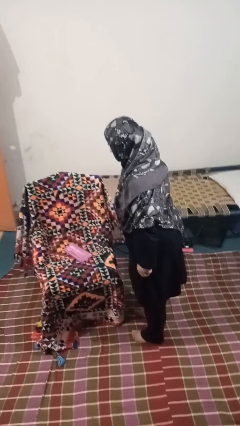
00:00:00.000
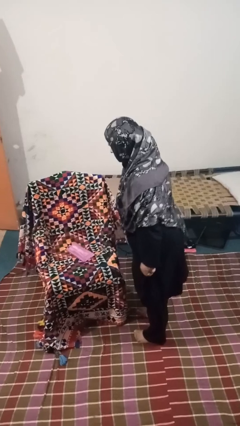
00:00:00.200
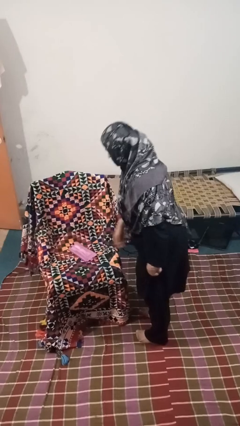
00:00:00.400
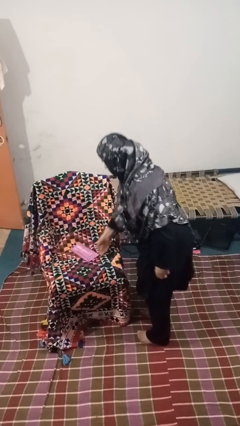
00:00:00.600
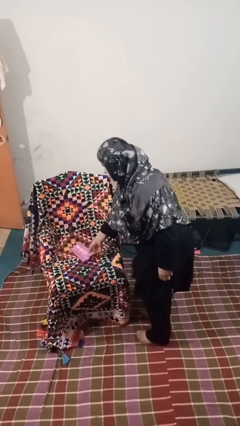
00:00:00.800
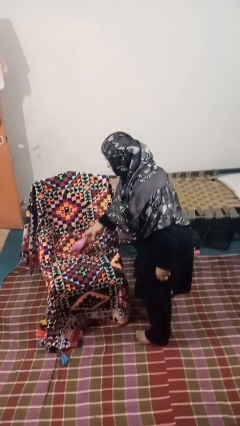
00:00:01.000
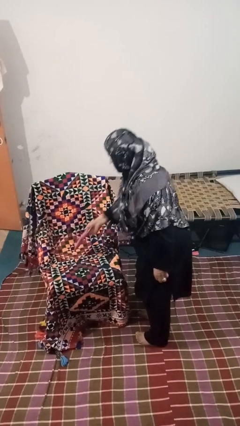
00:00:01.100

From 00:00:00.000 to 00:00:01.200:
person puts down object on couch

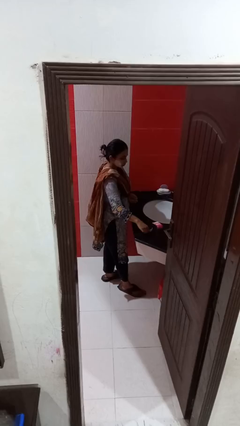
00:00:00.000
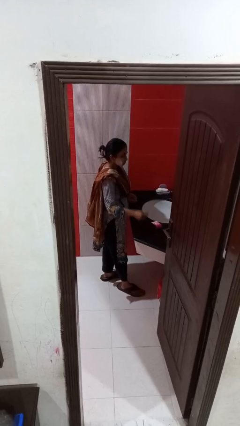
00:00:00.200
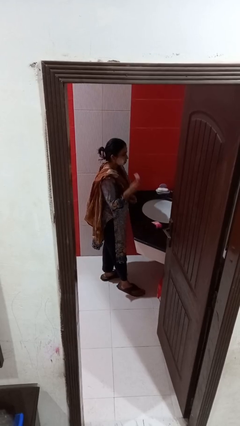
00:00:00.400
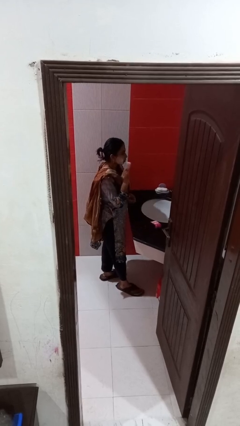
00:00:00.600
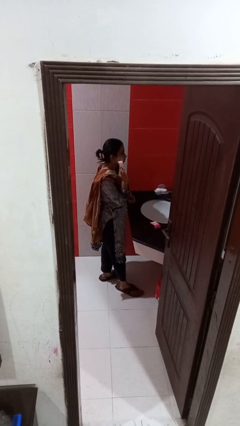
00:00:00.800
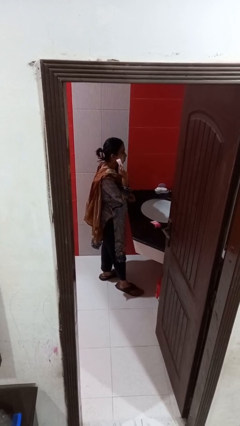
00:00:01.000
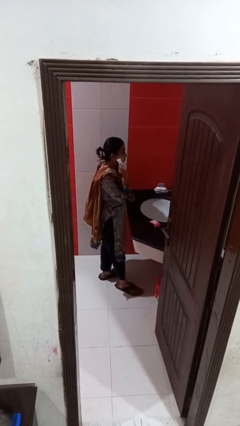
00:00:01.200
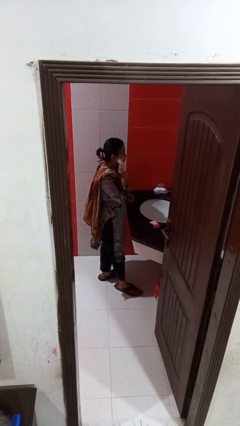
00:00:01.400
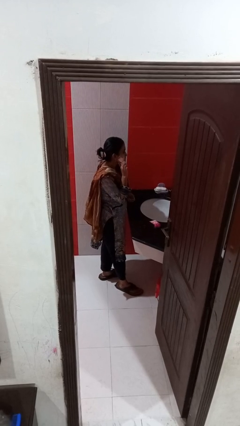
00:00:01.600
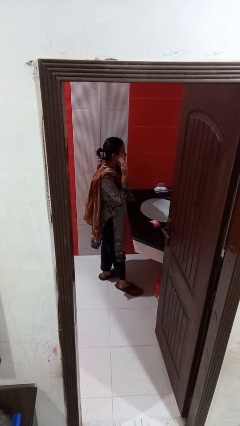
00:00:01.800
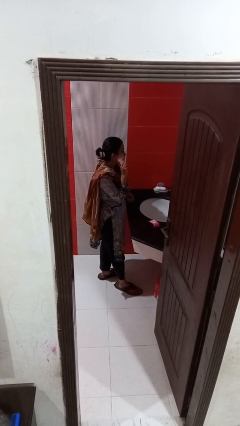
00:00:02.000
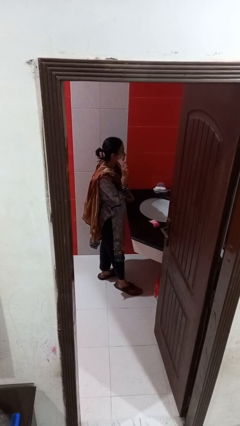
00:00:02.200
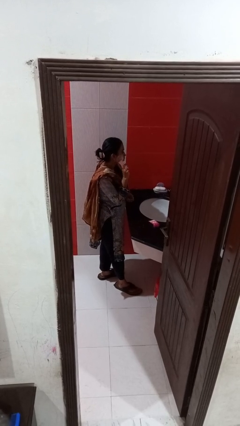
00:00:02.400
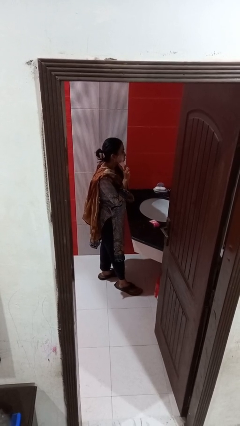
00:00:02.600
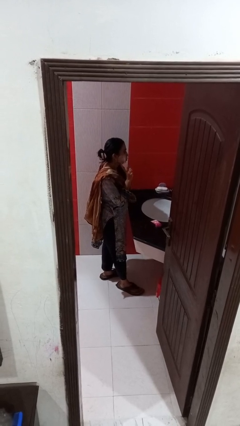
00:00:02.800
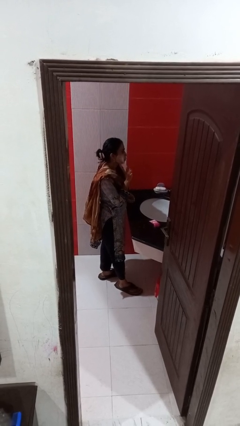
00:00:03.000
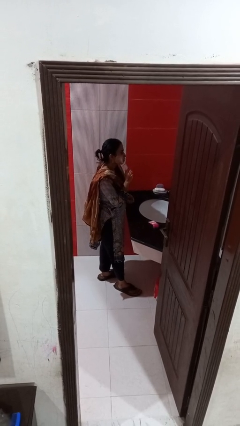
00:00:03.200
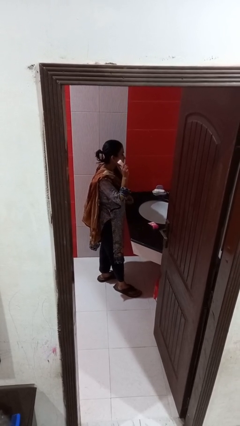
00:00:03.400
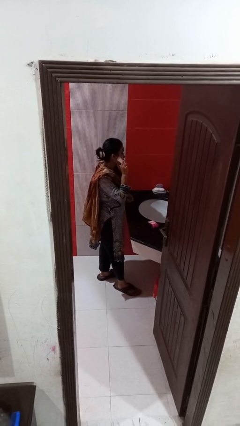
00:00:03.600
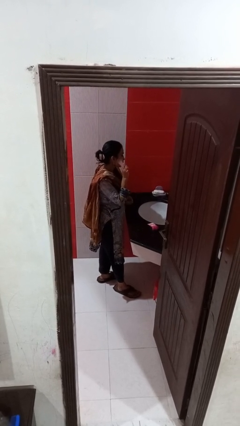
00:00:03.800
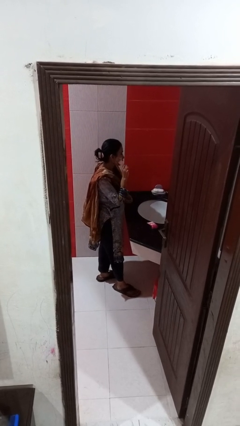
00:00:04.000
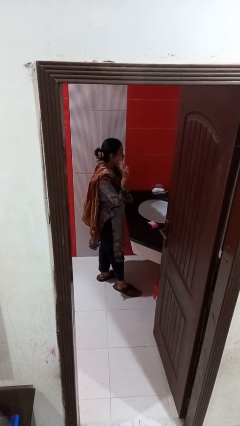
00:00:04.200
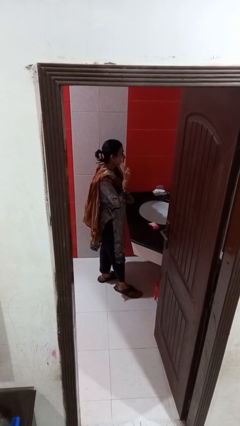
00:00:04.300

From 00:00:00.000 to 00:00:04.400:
person shaves face

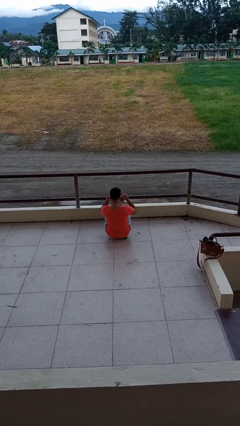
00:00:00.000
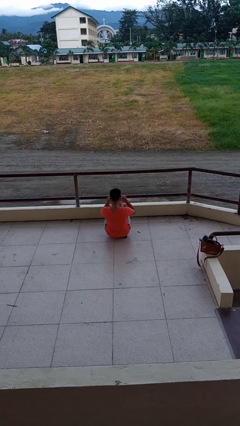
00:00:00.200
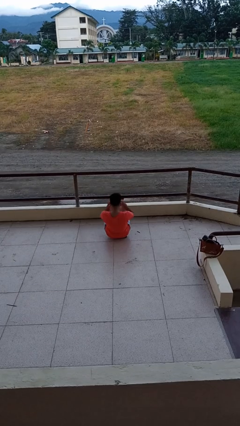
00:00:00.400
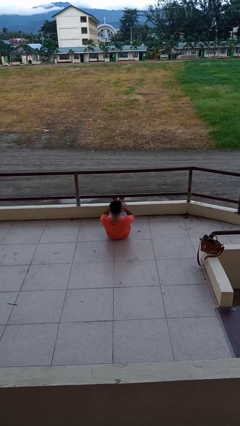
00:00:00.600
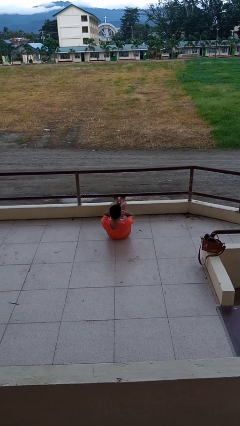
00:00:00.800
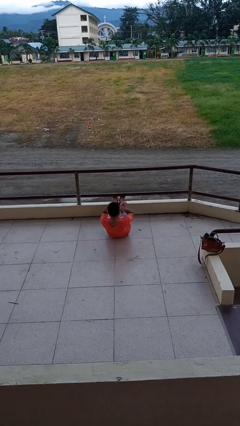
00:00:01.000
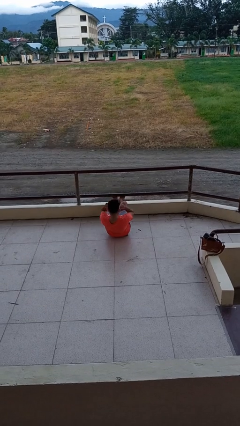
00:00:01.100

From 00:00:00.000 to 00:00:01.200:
person exercises with situp

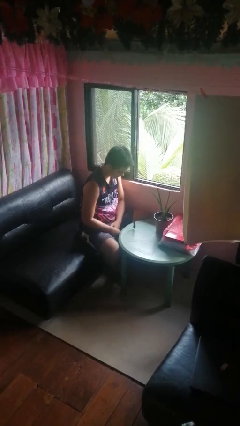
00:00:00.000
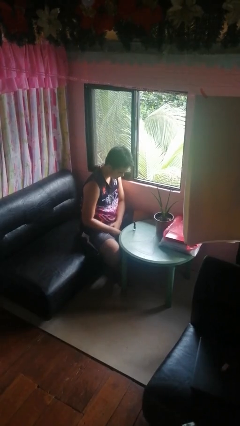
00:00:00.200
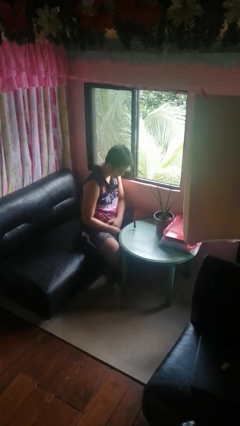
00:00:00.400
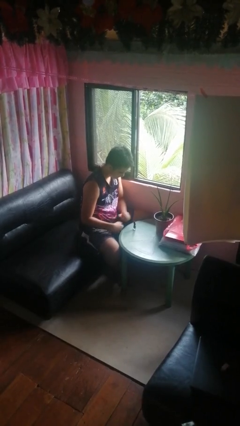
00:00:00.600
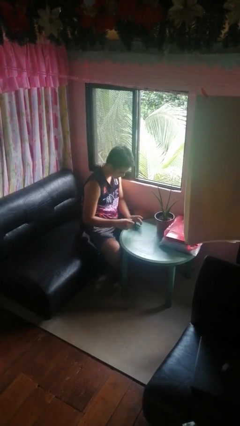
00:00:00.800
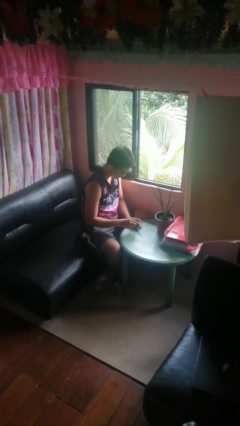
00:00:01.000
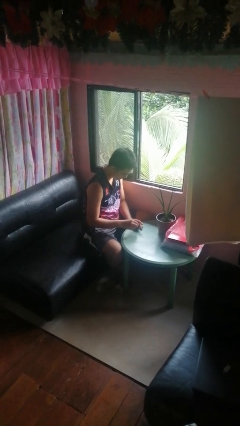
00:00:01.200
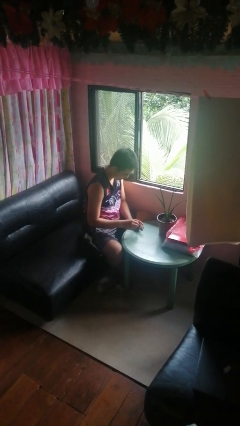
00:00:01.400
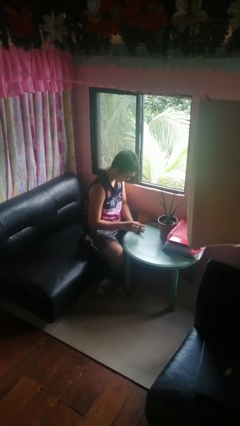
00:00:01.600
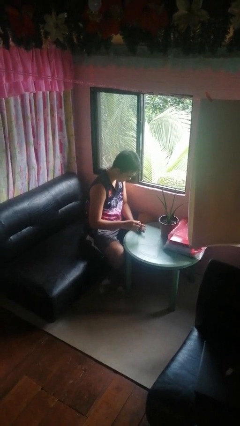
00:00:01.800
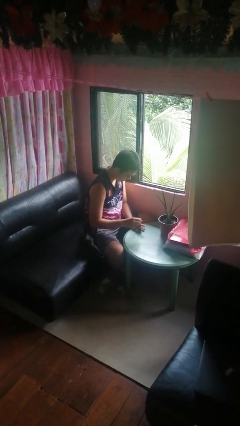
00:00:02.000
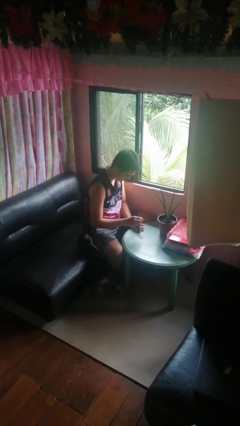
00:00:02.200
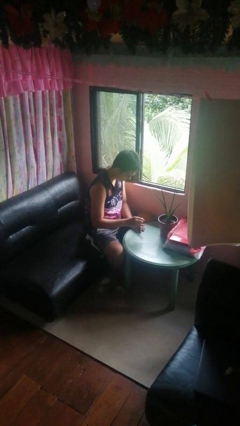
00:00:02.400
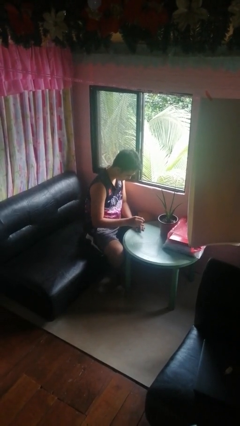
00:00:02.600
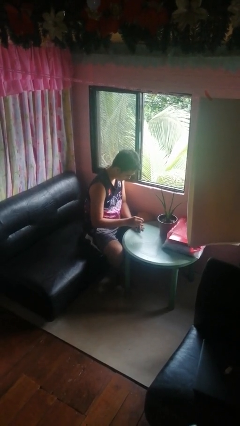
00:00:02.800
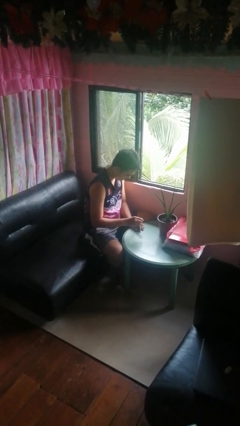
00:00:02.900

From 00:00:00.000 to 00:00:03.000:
person paints fingernails

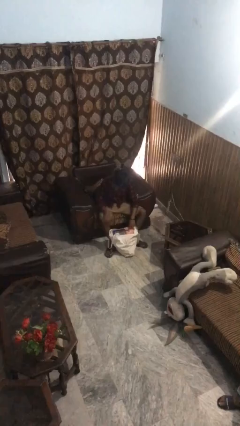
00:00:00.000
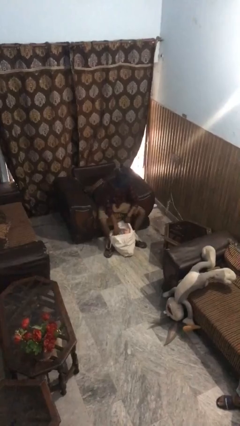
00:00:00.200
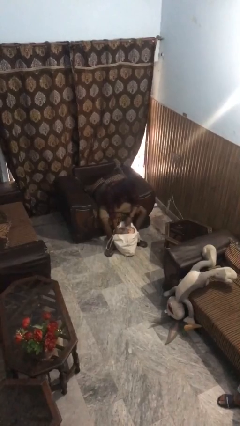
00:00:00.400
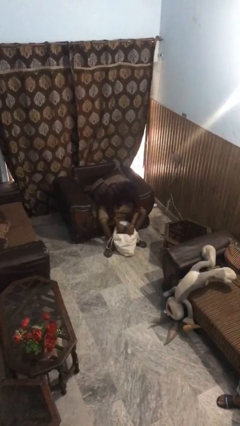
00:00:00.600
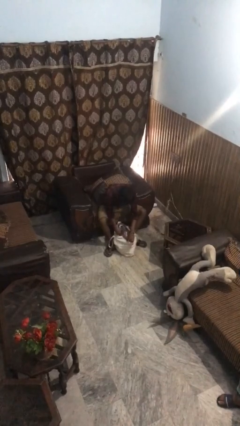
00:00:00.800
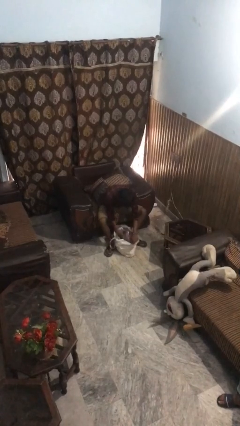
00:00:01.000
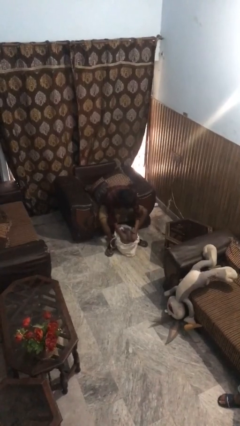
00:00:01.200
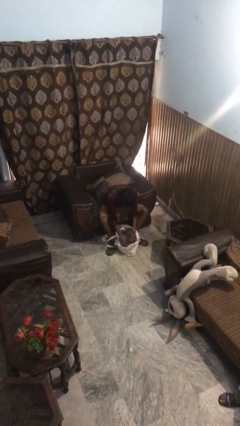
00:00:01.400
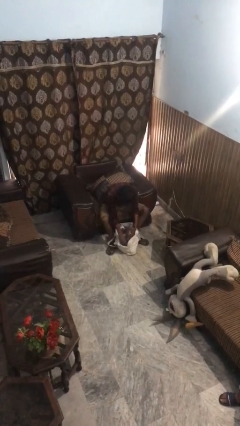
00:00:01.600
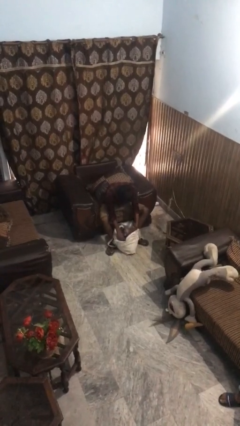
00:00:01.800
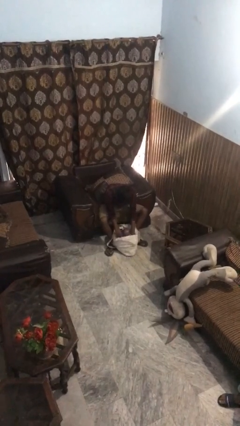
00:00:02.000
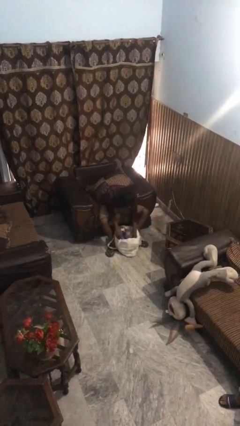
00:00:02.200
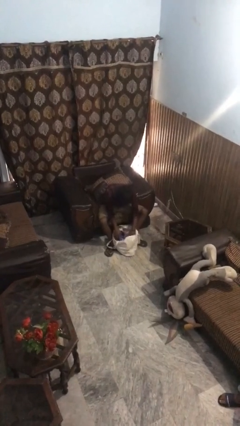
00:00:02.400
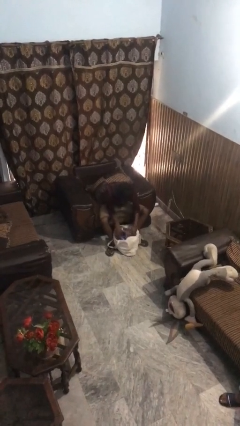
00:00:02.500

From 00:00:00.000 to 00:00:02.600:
person searches in bag

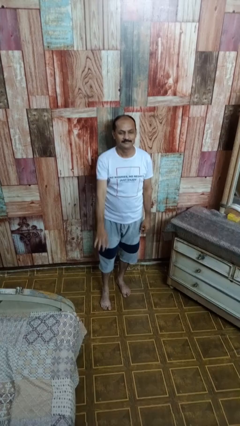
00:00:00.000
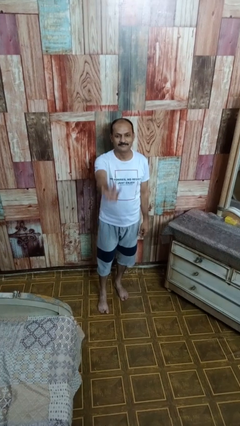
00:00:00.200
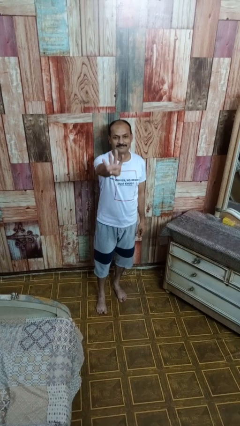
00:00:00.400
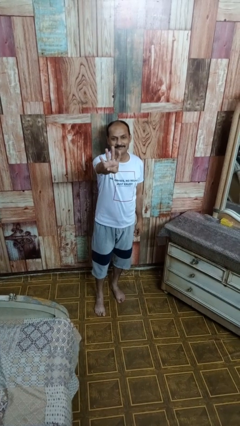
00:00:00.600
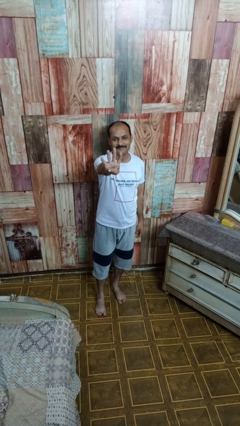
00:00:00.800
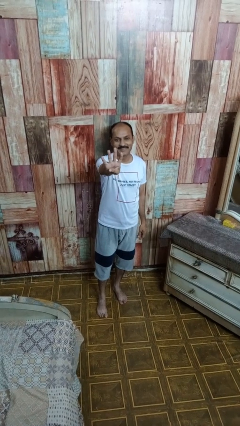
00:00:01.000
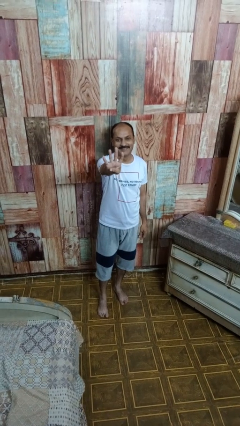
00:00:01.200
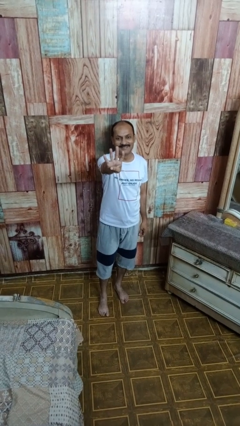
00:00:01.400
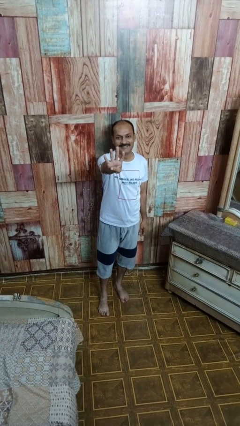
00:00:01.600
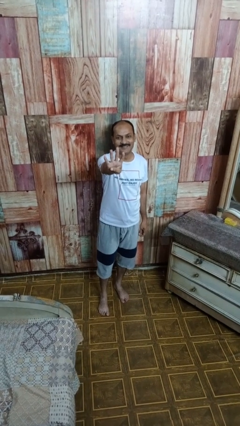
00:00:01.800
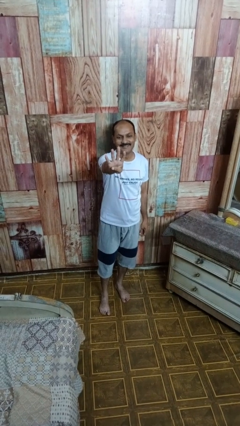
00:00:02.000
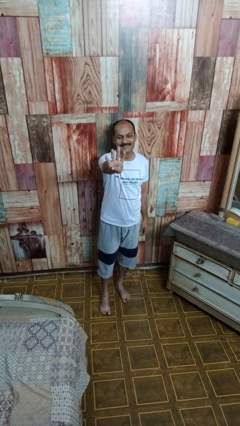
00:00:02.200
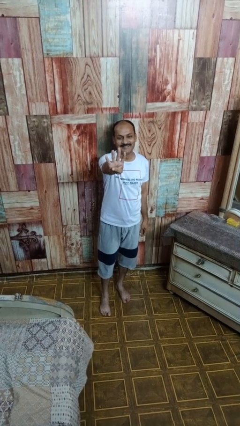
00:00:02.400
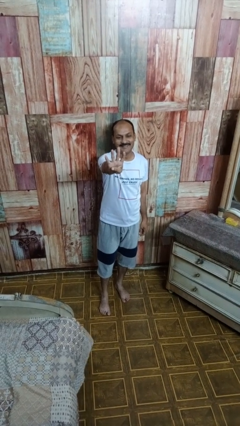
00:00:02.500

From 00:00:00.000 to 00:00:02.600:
person gestures number four

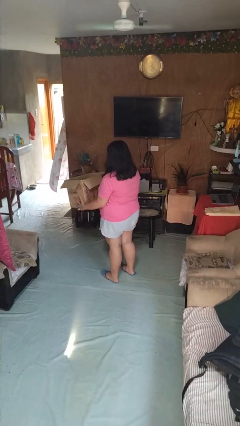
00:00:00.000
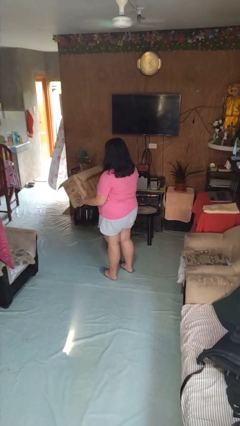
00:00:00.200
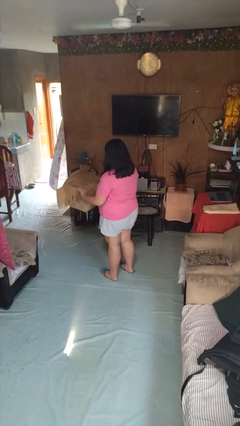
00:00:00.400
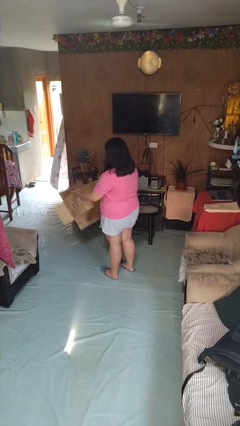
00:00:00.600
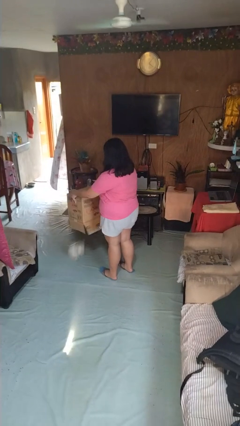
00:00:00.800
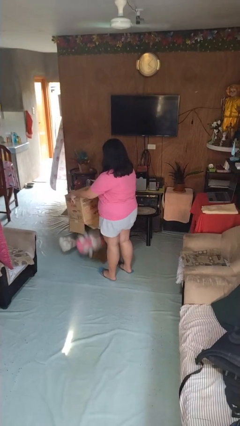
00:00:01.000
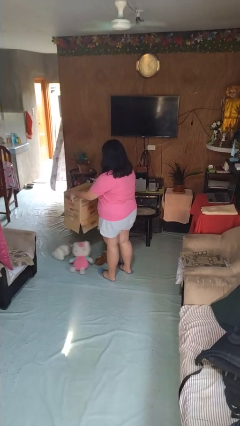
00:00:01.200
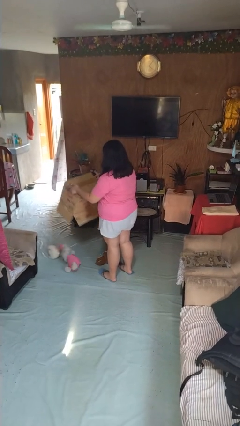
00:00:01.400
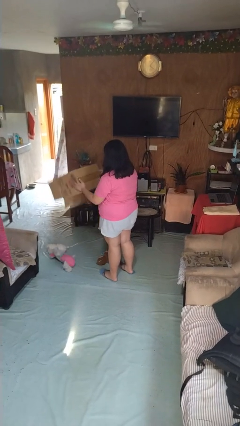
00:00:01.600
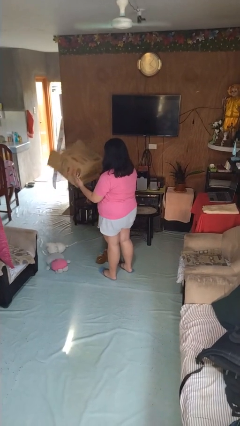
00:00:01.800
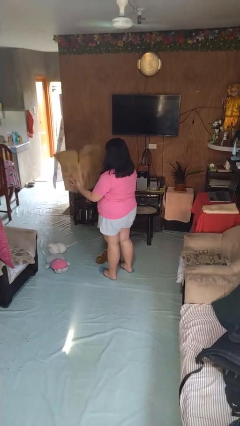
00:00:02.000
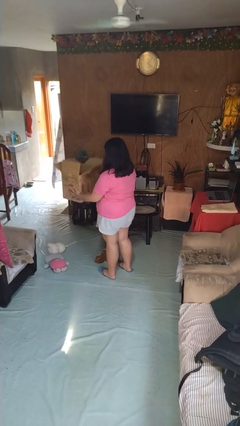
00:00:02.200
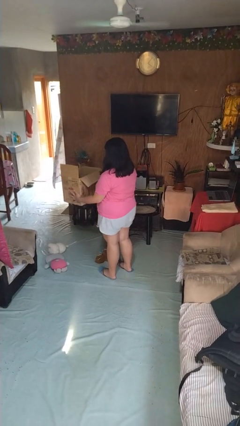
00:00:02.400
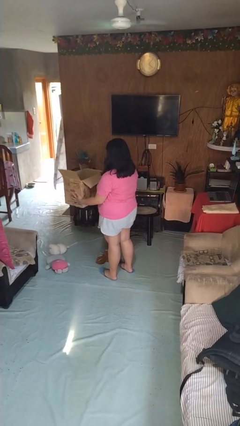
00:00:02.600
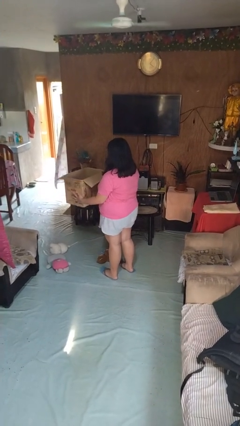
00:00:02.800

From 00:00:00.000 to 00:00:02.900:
person unloads box onto floor
